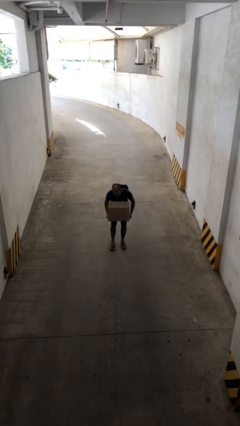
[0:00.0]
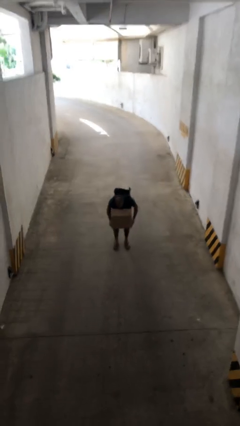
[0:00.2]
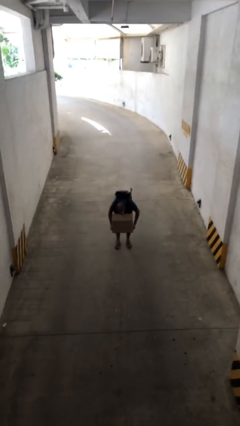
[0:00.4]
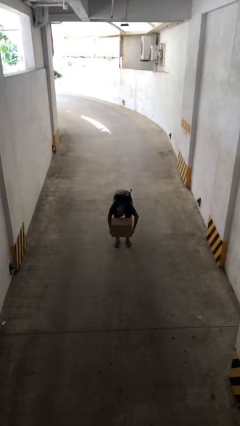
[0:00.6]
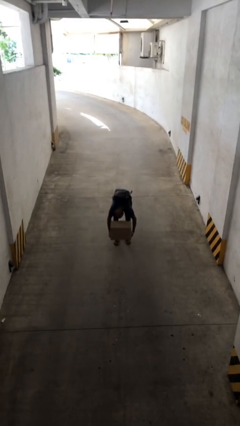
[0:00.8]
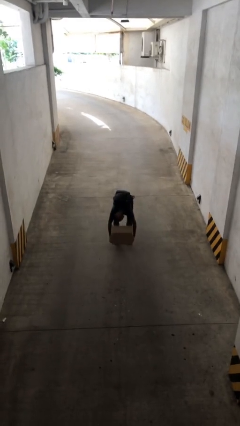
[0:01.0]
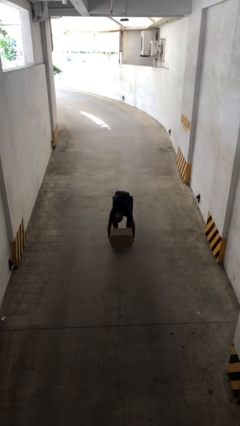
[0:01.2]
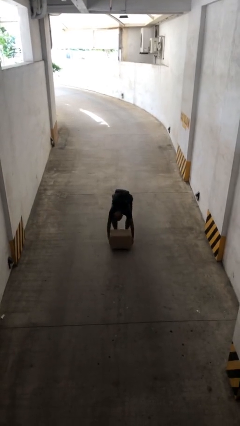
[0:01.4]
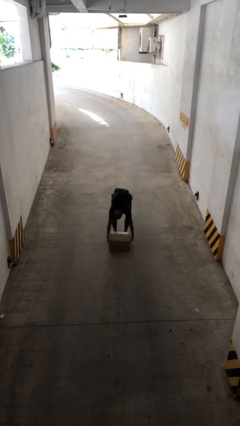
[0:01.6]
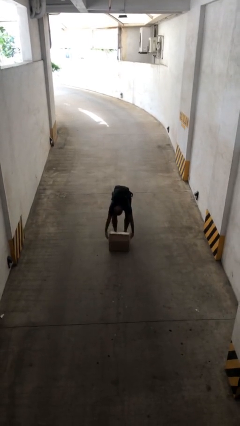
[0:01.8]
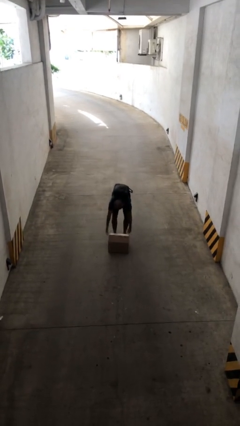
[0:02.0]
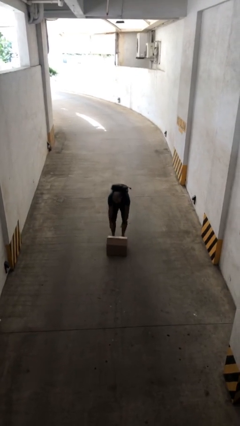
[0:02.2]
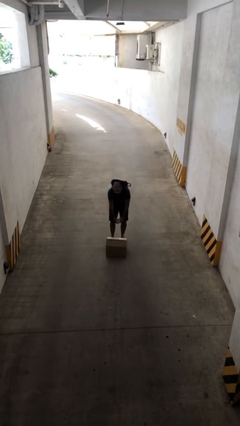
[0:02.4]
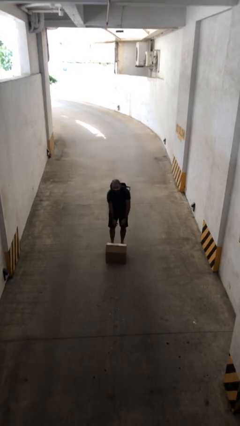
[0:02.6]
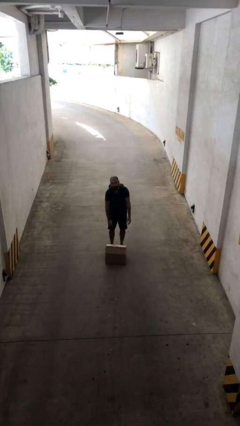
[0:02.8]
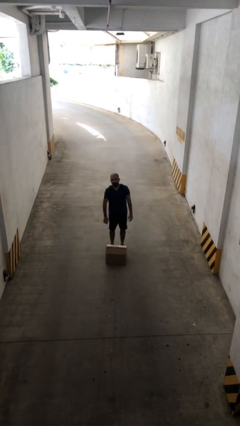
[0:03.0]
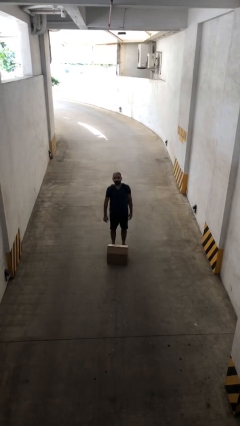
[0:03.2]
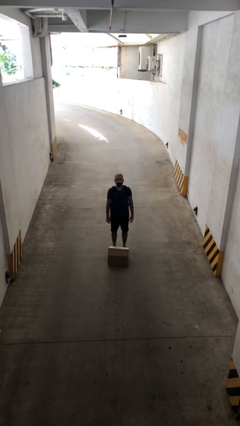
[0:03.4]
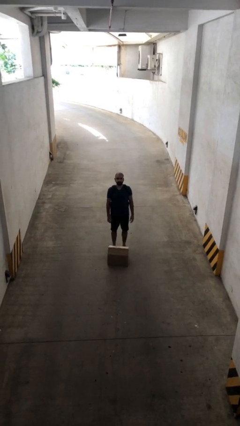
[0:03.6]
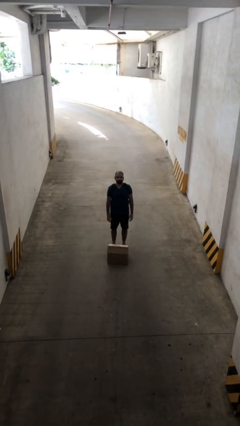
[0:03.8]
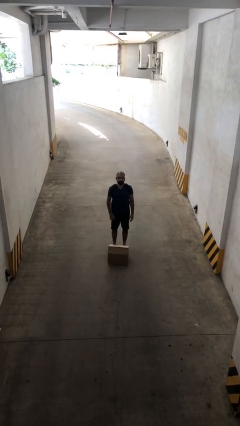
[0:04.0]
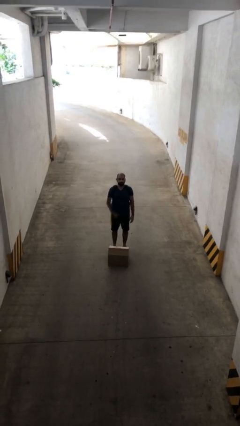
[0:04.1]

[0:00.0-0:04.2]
person puts down object on floor

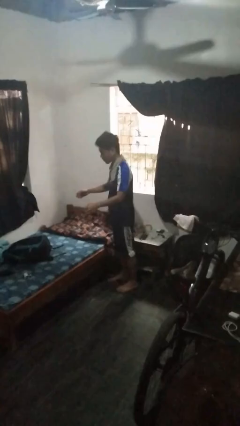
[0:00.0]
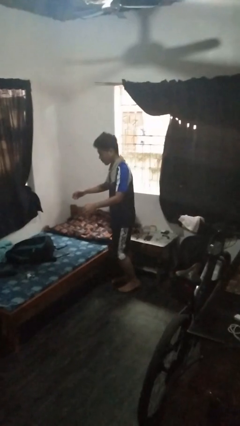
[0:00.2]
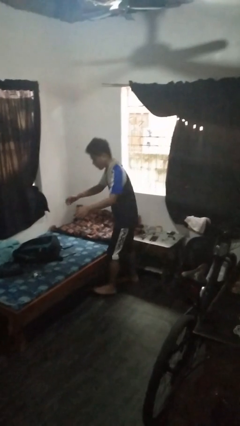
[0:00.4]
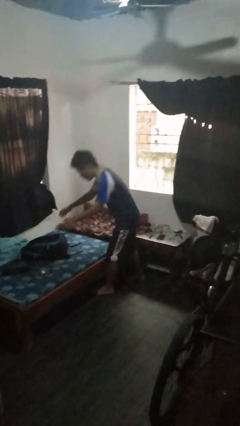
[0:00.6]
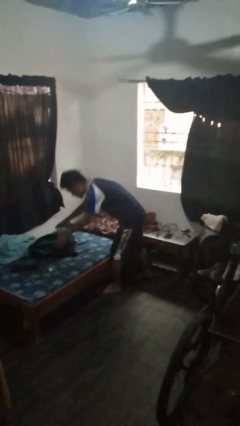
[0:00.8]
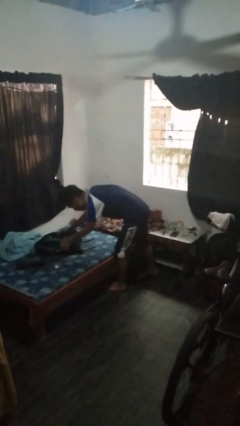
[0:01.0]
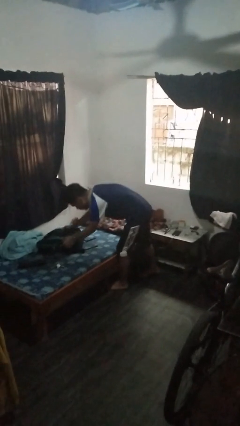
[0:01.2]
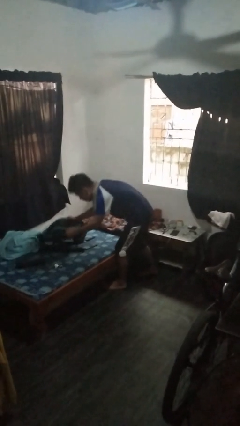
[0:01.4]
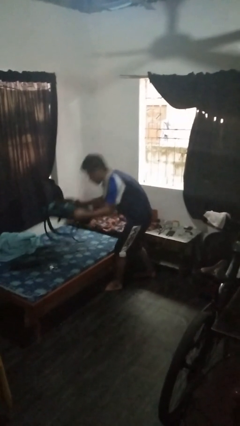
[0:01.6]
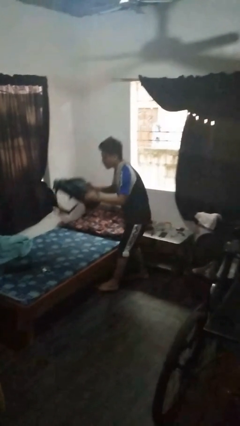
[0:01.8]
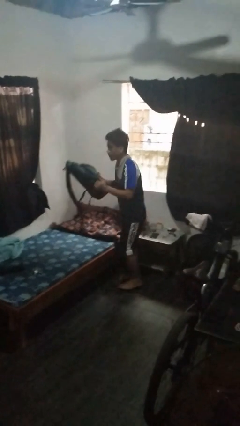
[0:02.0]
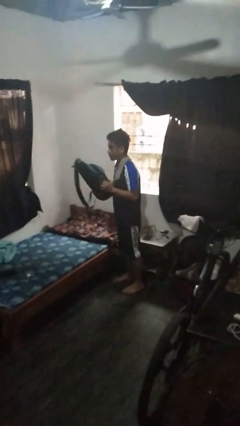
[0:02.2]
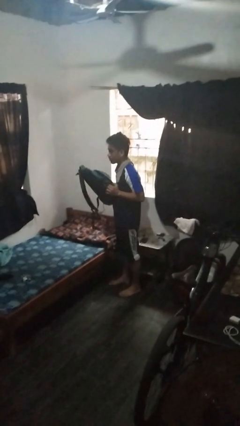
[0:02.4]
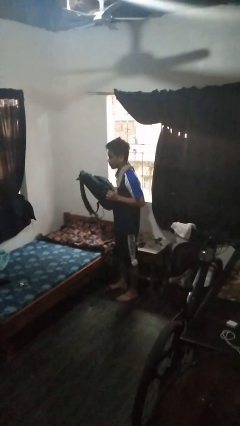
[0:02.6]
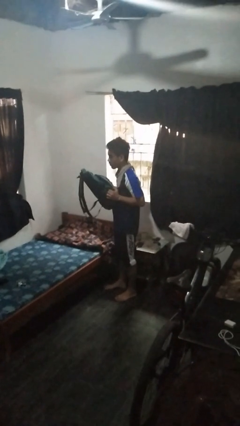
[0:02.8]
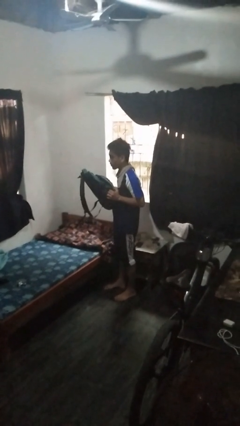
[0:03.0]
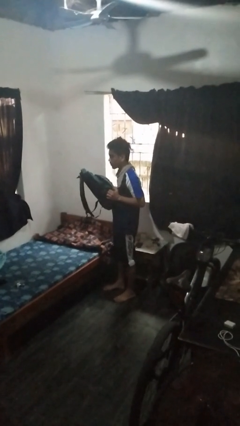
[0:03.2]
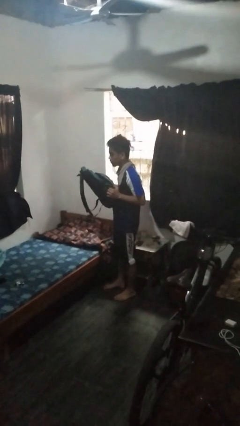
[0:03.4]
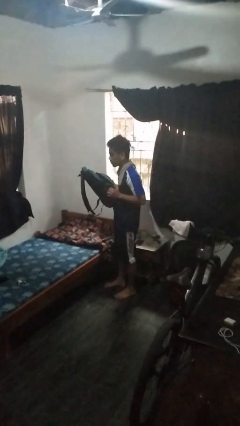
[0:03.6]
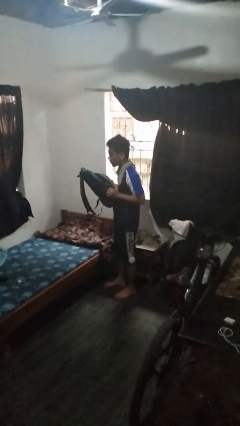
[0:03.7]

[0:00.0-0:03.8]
person picks up object from bed

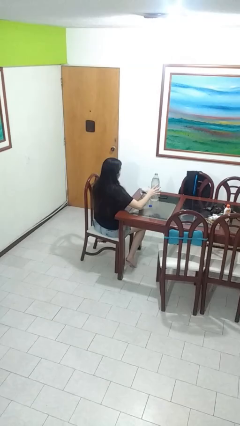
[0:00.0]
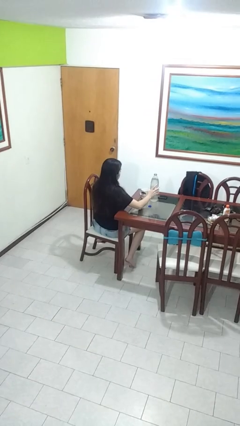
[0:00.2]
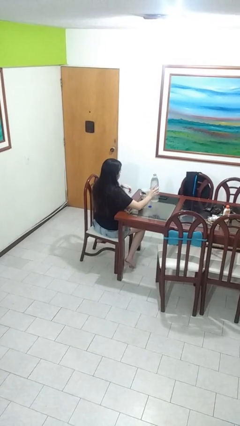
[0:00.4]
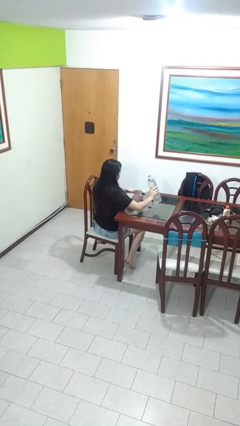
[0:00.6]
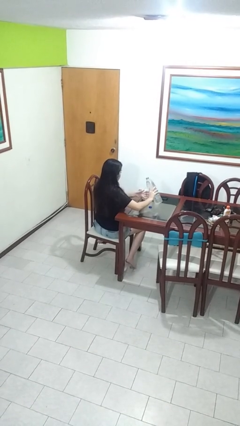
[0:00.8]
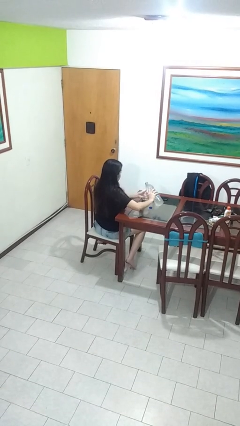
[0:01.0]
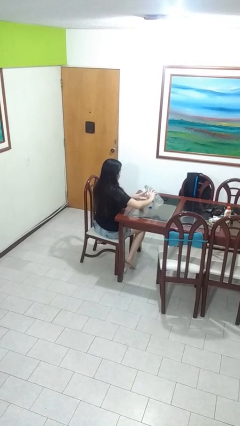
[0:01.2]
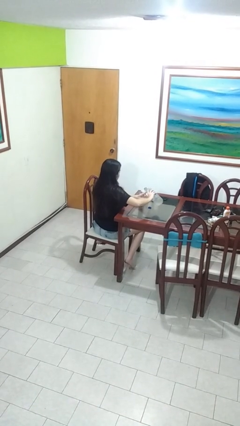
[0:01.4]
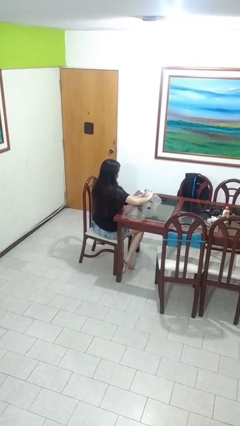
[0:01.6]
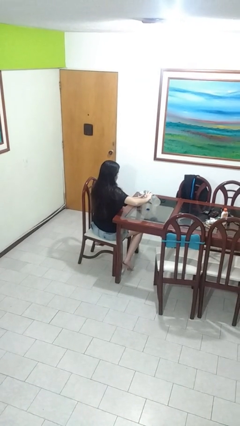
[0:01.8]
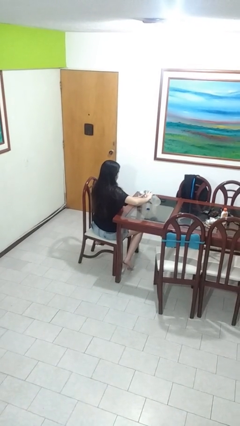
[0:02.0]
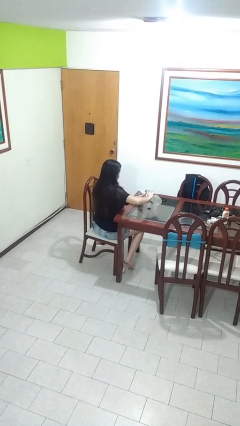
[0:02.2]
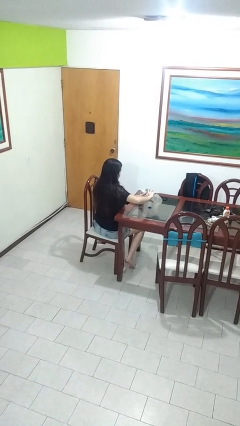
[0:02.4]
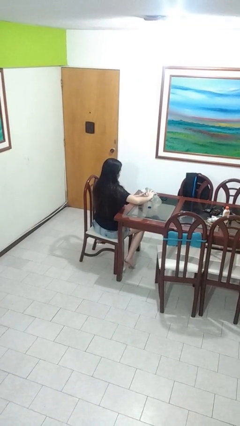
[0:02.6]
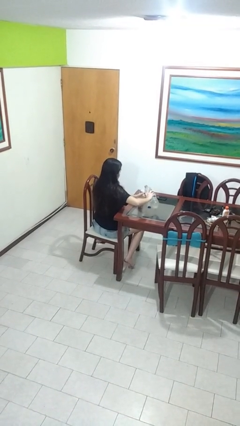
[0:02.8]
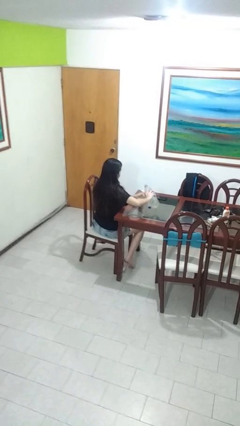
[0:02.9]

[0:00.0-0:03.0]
person pours liquid into cup

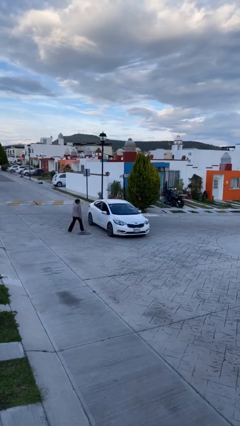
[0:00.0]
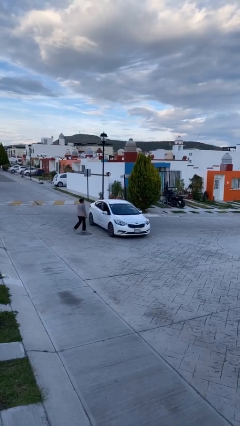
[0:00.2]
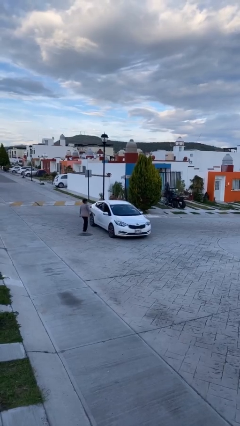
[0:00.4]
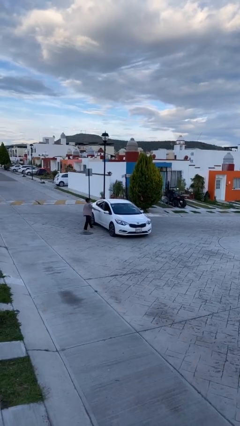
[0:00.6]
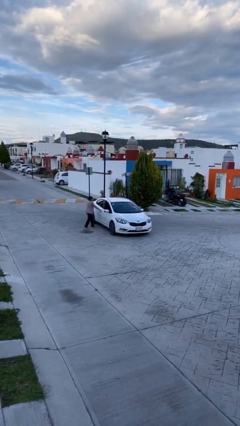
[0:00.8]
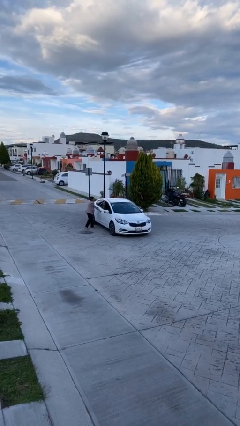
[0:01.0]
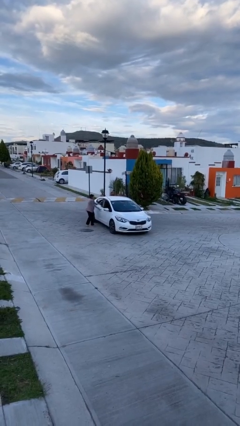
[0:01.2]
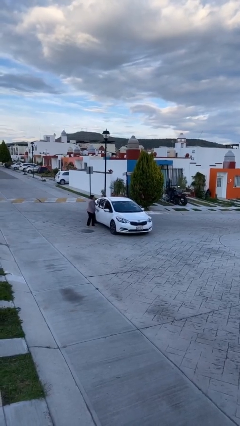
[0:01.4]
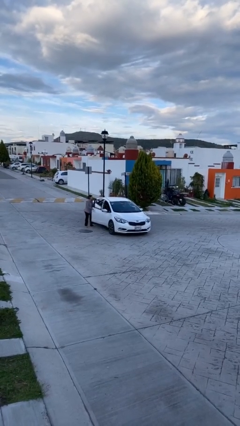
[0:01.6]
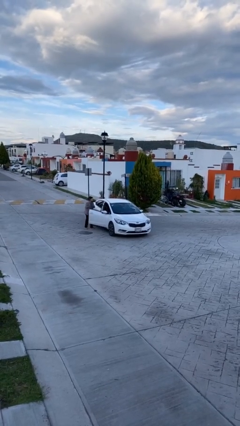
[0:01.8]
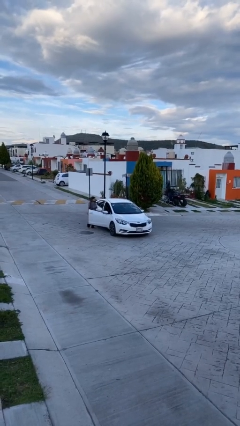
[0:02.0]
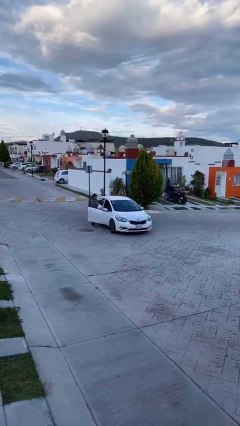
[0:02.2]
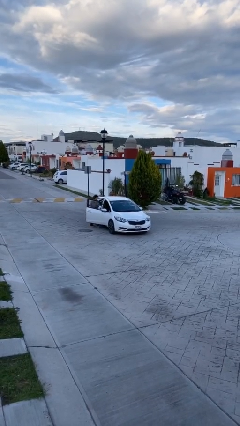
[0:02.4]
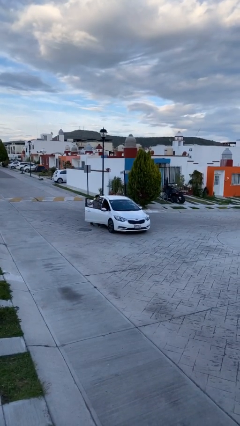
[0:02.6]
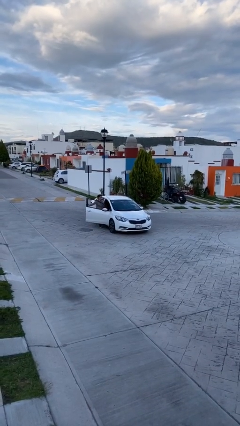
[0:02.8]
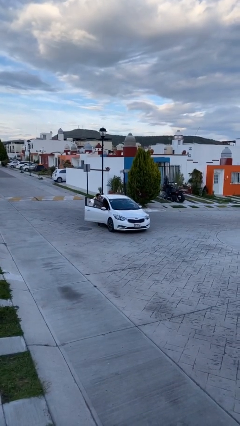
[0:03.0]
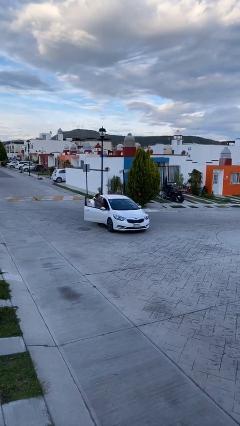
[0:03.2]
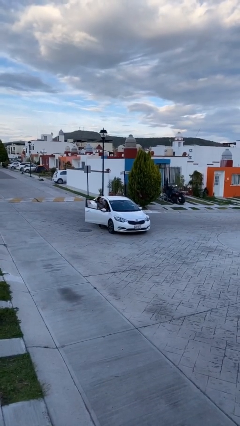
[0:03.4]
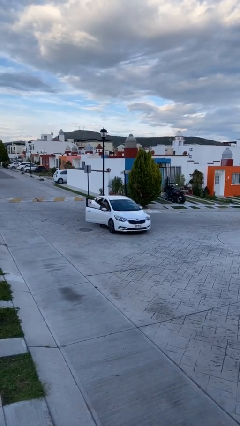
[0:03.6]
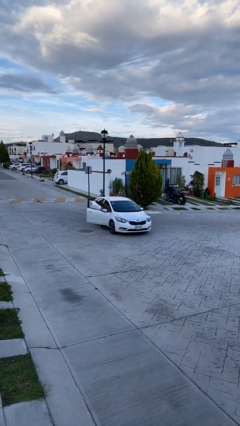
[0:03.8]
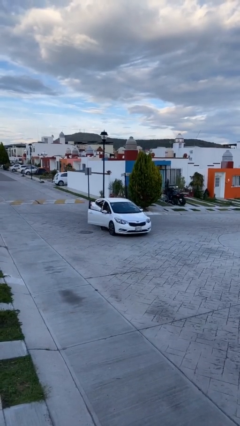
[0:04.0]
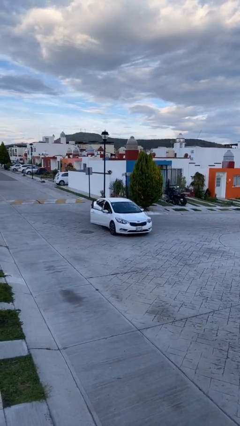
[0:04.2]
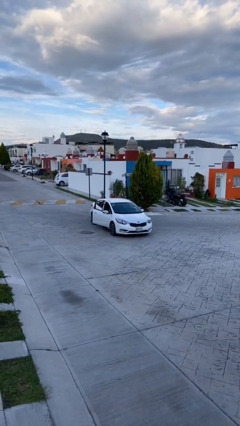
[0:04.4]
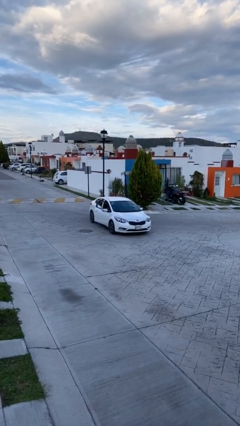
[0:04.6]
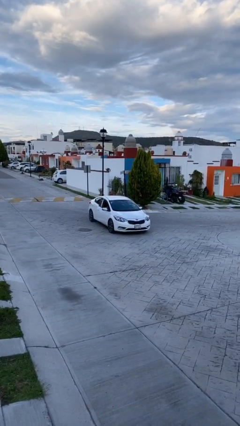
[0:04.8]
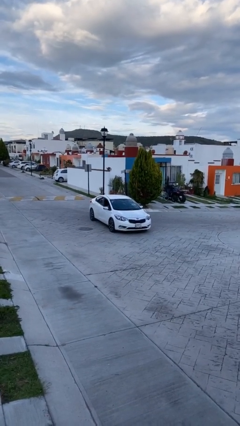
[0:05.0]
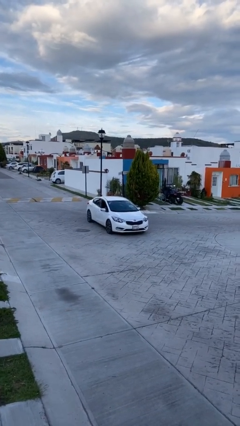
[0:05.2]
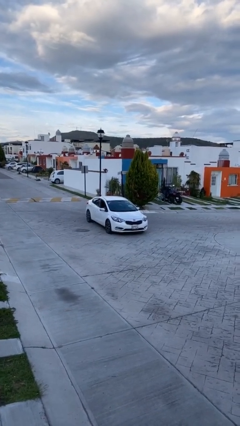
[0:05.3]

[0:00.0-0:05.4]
car picks up person

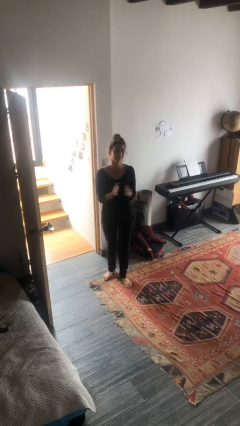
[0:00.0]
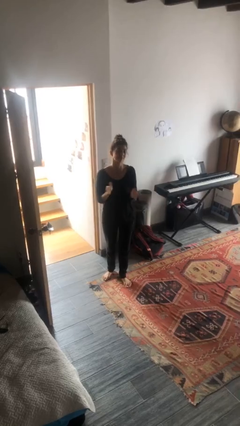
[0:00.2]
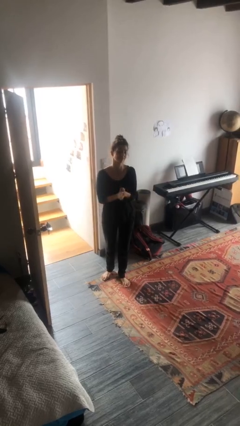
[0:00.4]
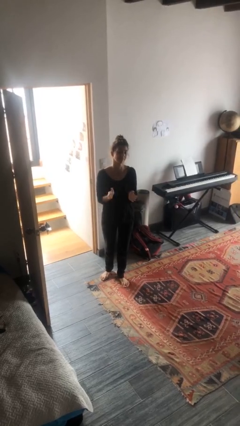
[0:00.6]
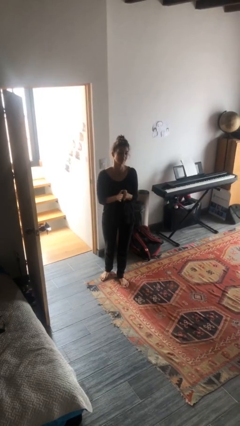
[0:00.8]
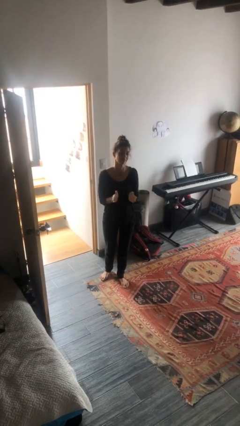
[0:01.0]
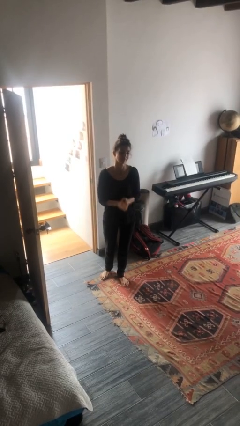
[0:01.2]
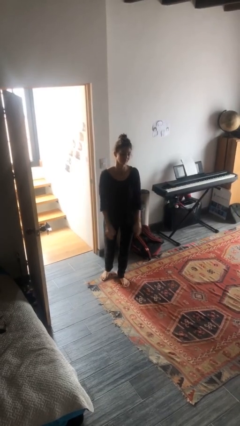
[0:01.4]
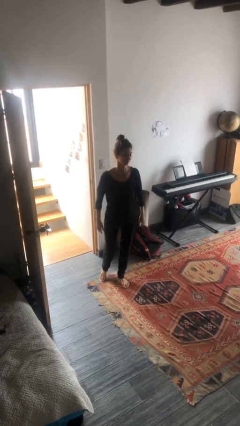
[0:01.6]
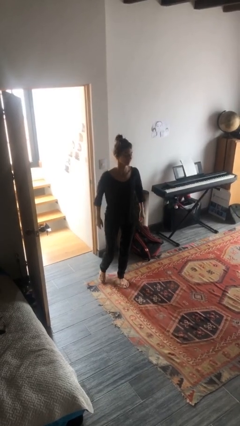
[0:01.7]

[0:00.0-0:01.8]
person claps hands
